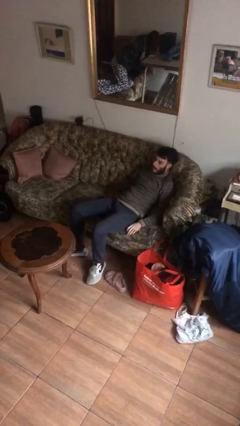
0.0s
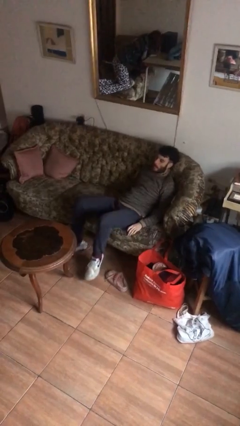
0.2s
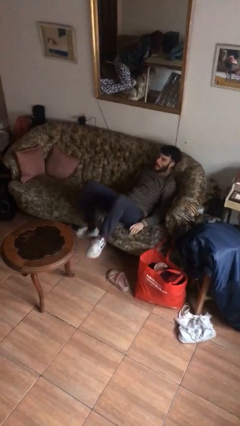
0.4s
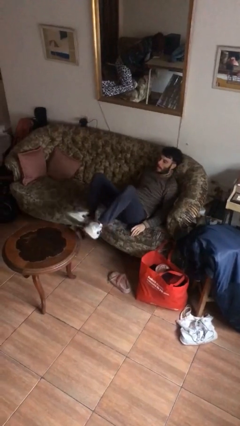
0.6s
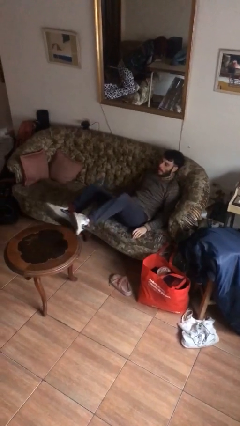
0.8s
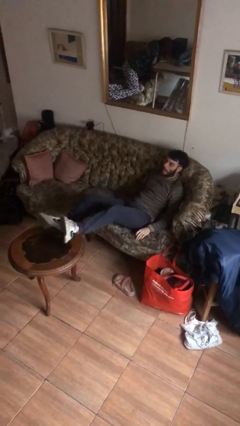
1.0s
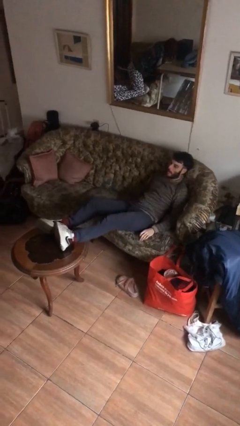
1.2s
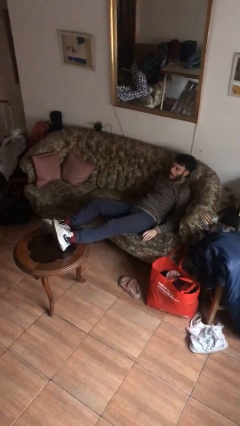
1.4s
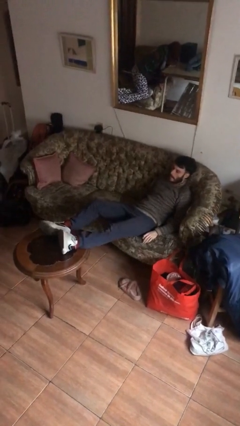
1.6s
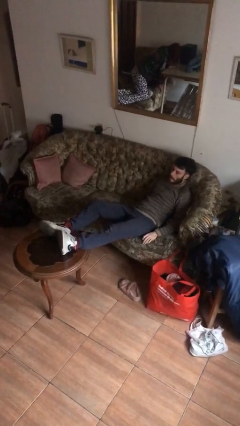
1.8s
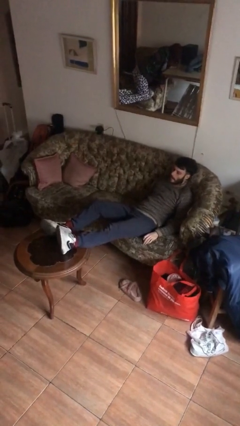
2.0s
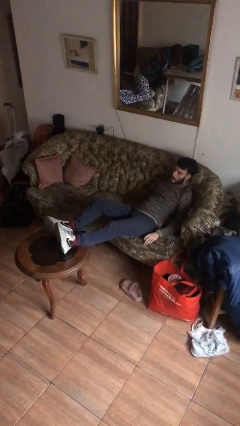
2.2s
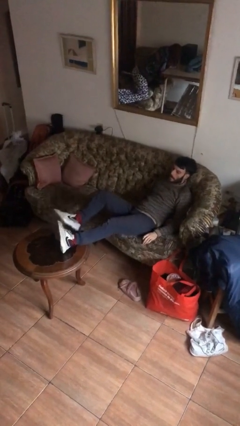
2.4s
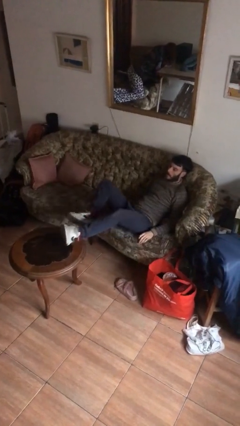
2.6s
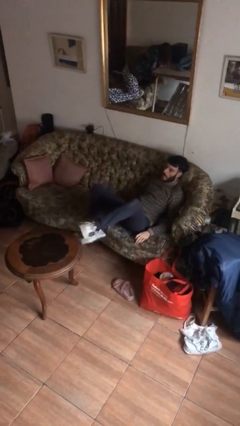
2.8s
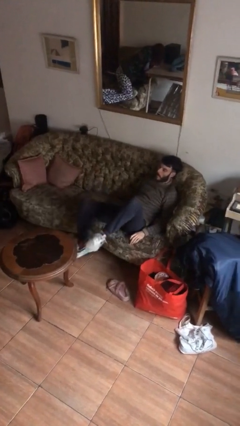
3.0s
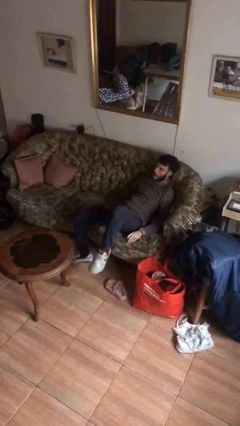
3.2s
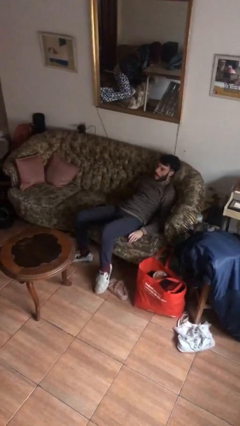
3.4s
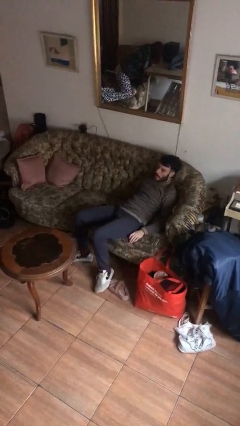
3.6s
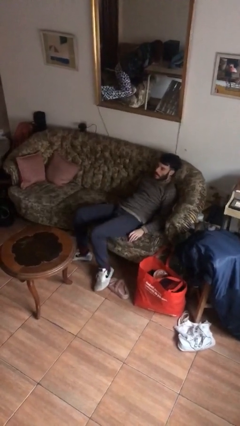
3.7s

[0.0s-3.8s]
person puts feet up

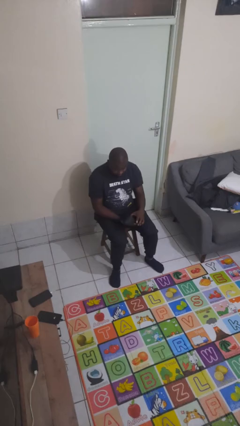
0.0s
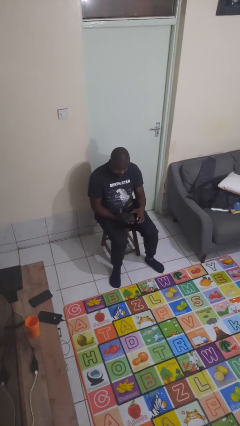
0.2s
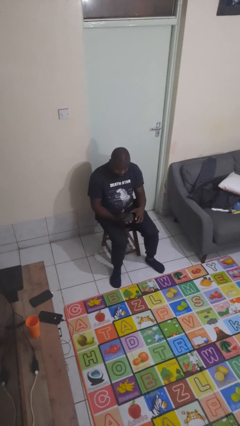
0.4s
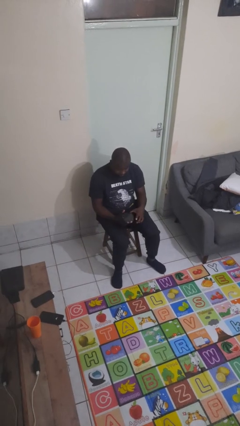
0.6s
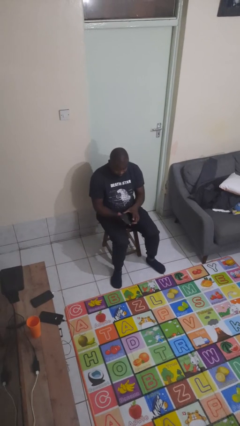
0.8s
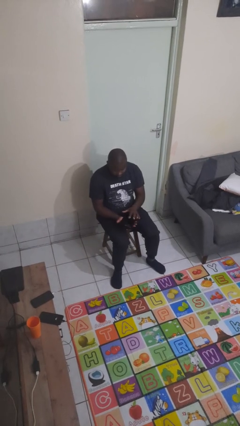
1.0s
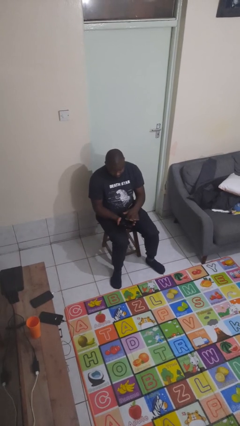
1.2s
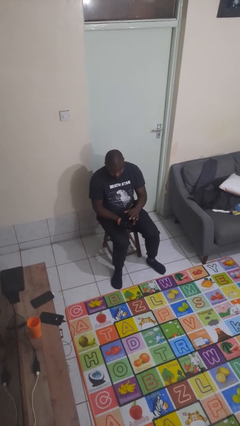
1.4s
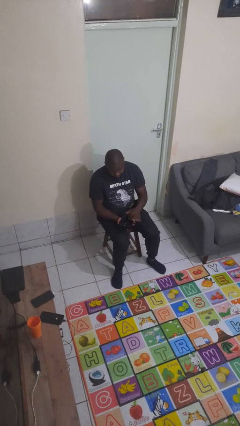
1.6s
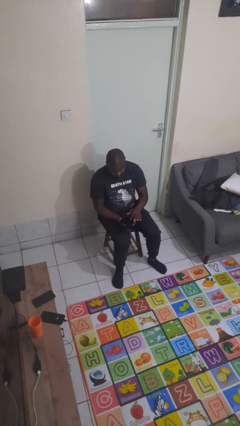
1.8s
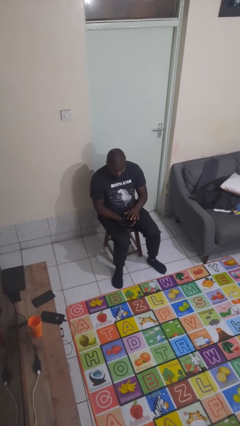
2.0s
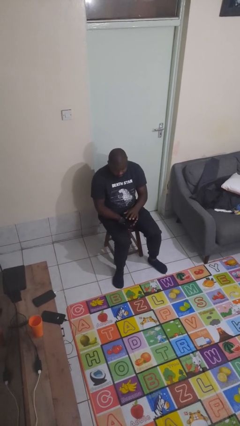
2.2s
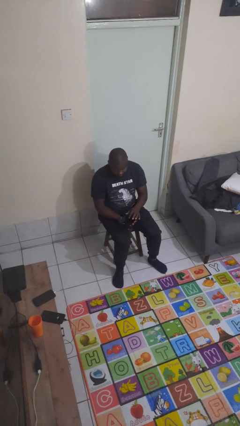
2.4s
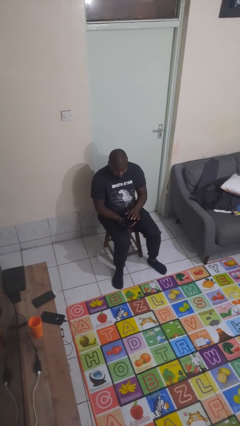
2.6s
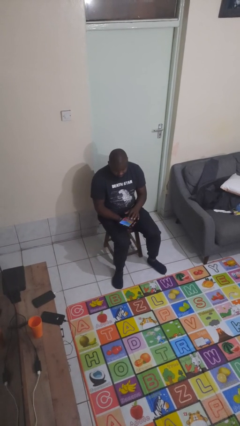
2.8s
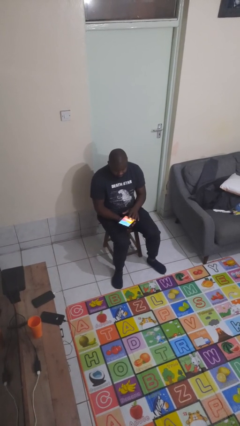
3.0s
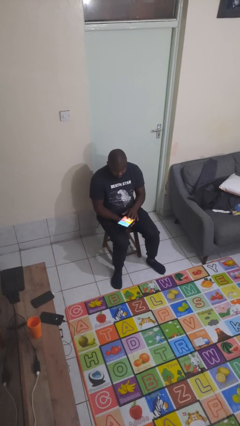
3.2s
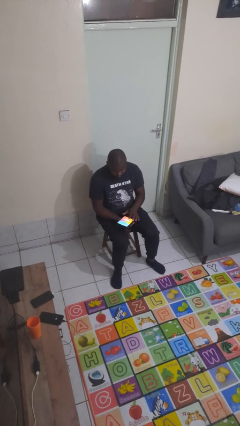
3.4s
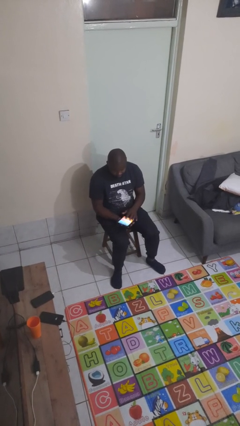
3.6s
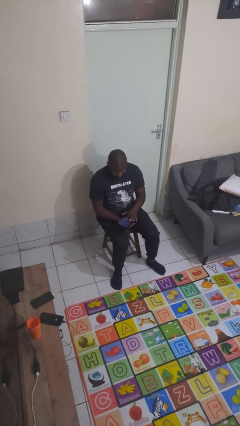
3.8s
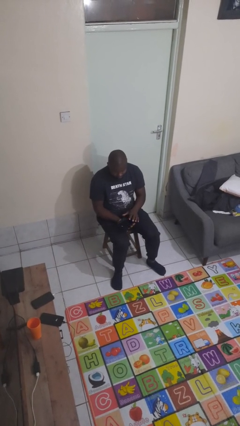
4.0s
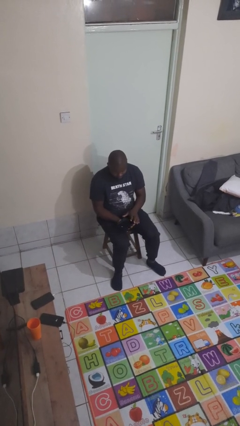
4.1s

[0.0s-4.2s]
person interacts with tablet

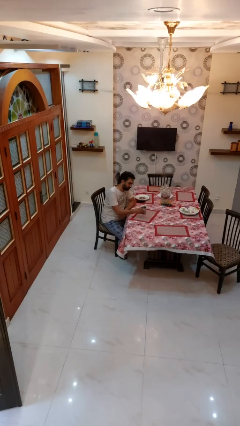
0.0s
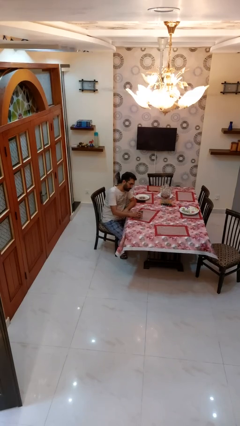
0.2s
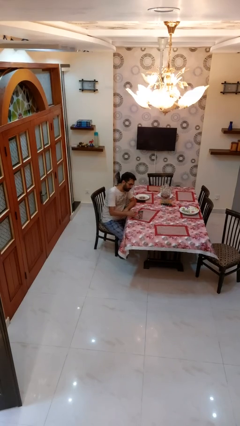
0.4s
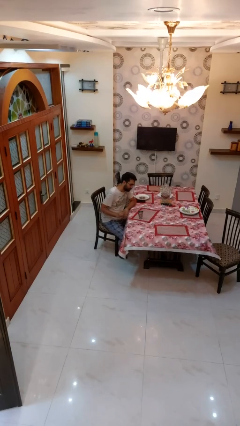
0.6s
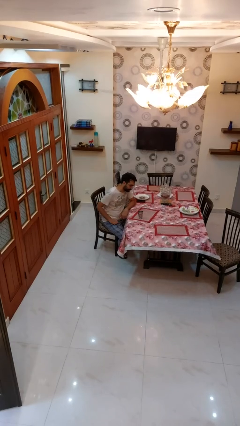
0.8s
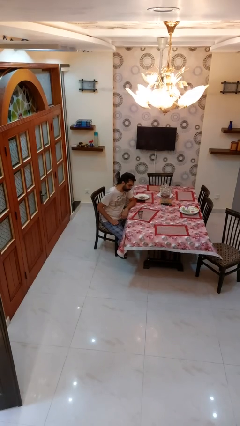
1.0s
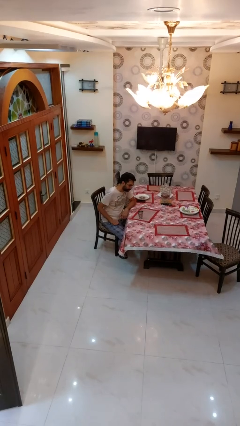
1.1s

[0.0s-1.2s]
person sets upright glass

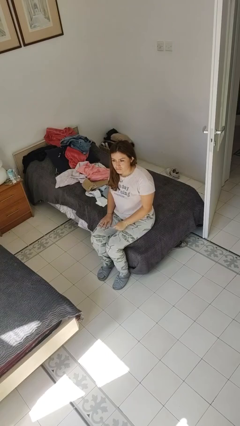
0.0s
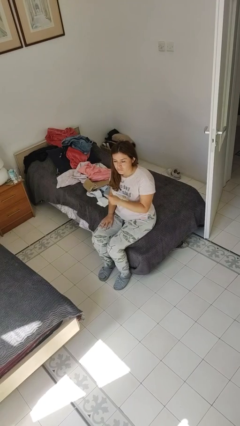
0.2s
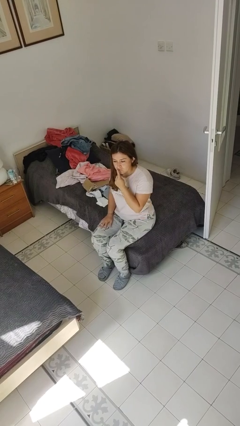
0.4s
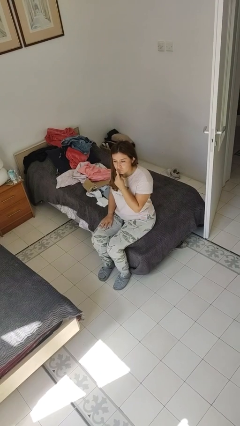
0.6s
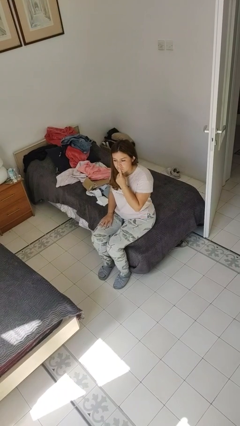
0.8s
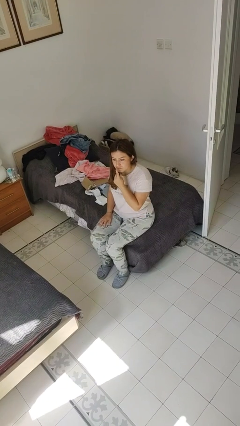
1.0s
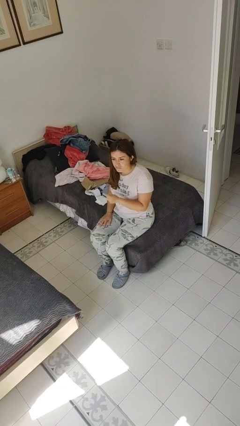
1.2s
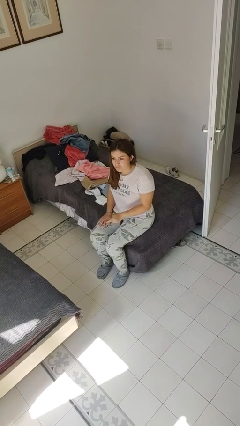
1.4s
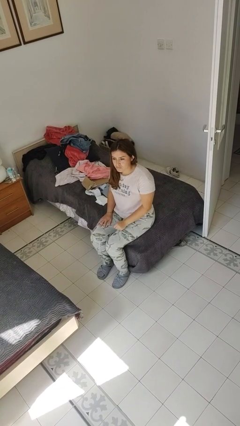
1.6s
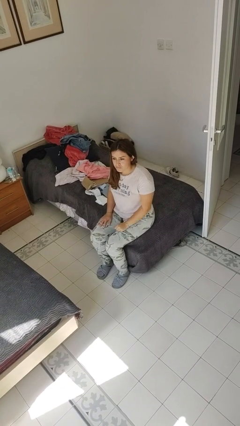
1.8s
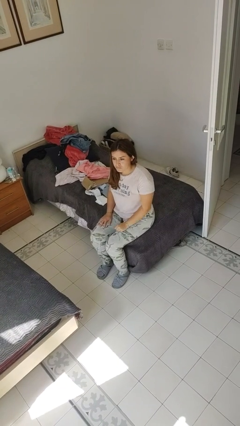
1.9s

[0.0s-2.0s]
person gestures be quiet

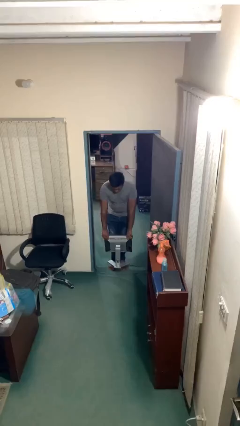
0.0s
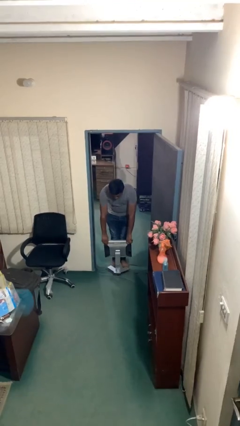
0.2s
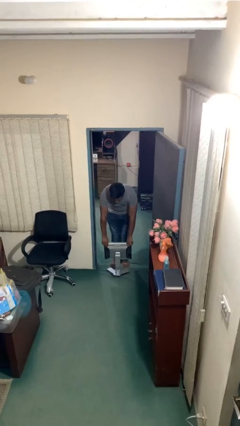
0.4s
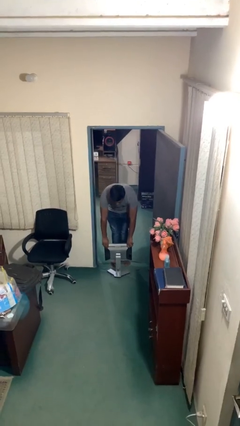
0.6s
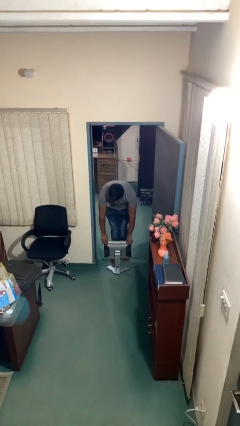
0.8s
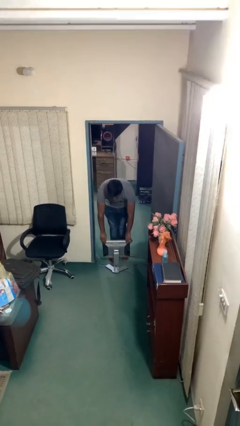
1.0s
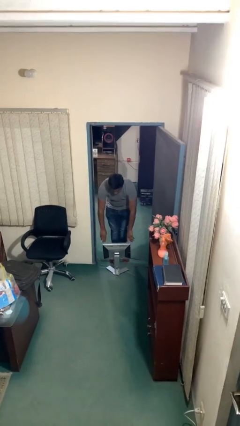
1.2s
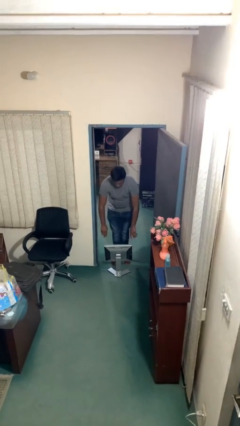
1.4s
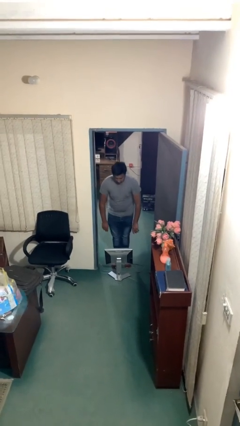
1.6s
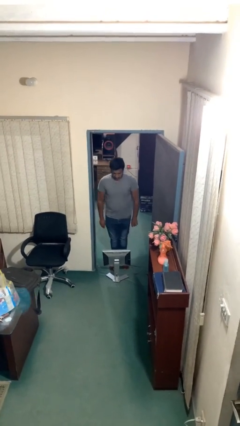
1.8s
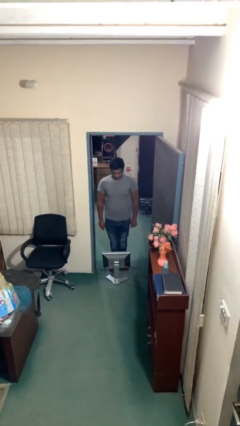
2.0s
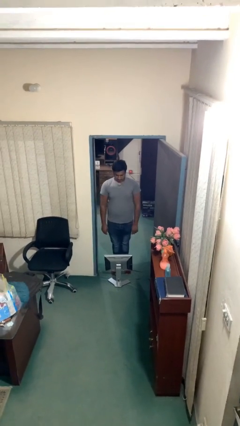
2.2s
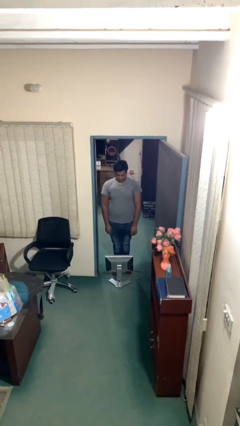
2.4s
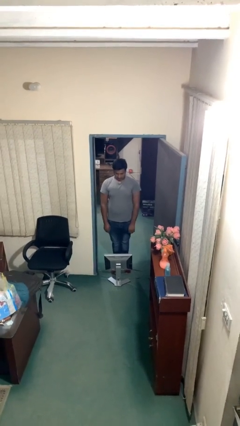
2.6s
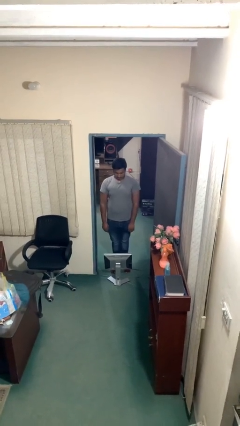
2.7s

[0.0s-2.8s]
person puts down object on floor

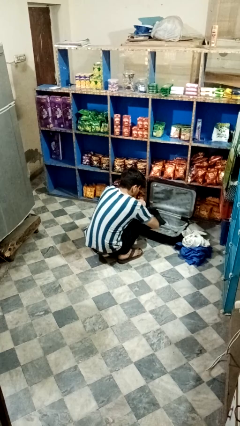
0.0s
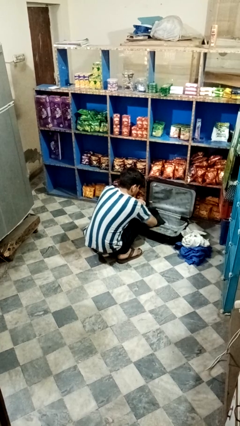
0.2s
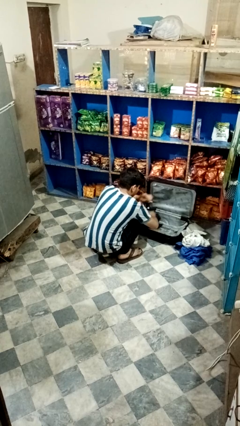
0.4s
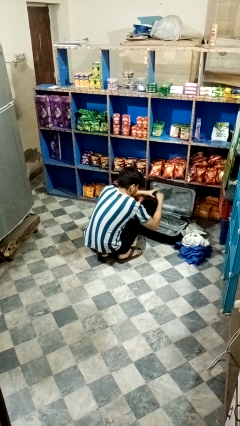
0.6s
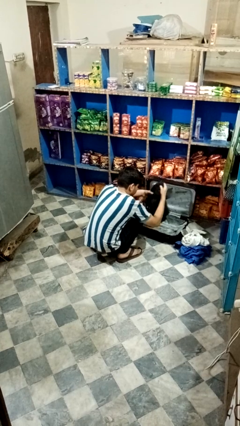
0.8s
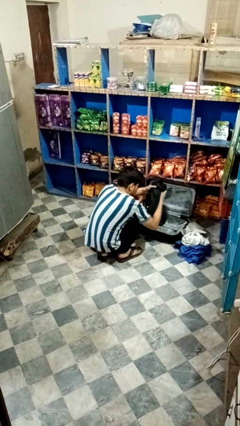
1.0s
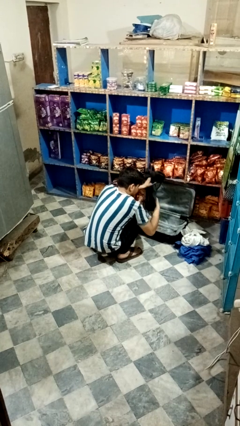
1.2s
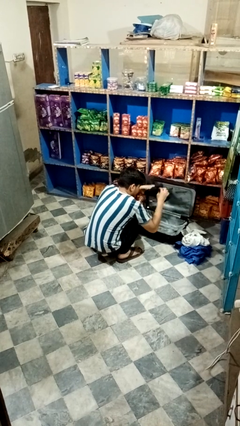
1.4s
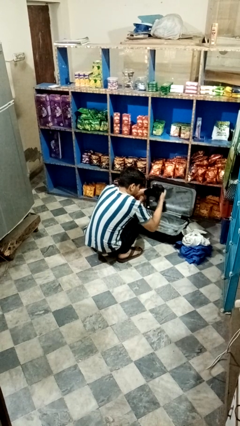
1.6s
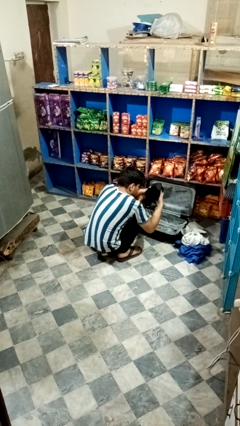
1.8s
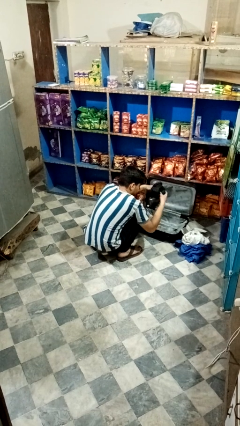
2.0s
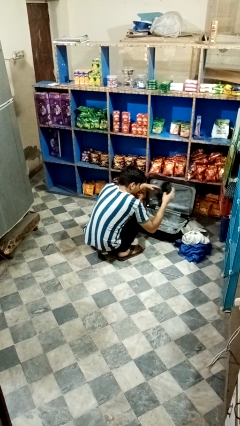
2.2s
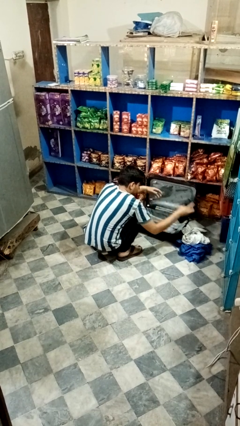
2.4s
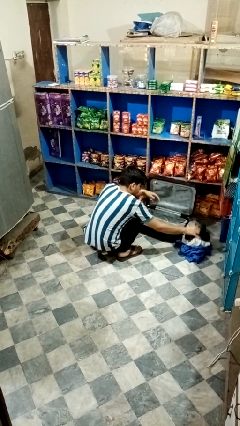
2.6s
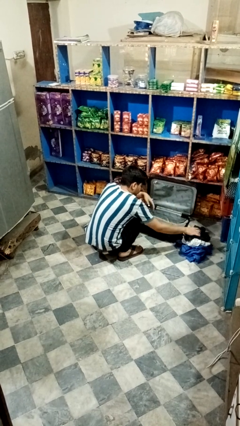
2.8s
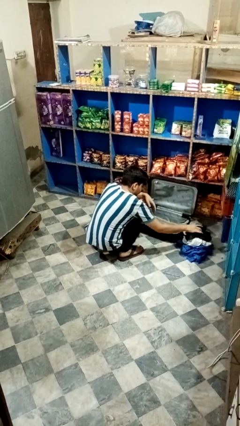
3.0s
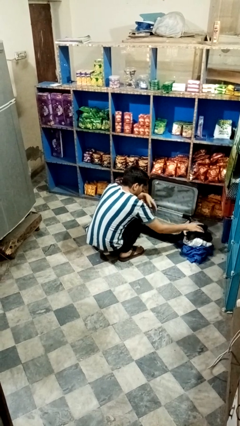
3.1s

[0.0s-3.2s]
person unloads clothes from suitcase

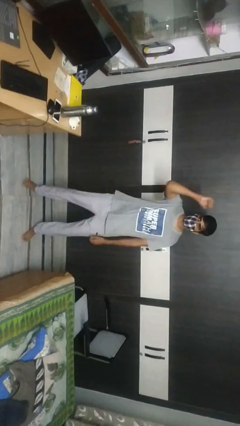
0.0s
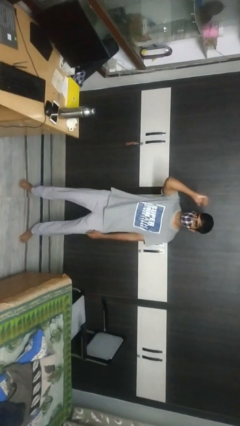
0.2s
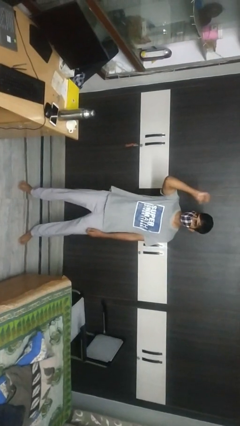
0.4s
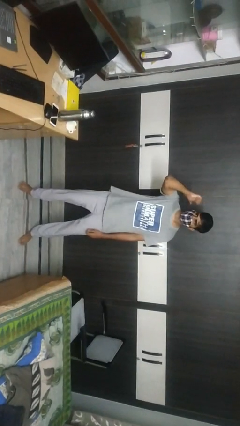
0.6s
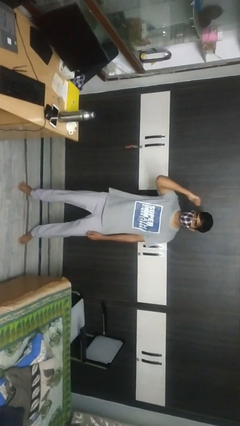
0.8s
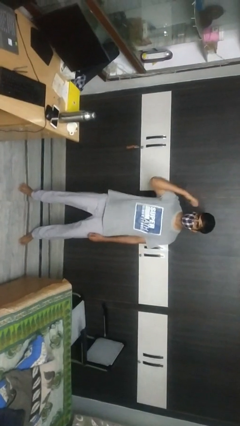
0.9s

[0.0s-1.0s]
person gestures behind me
